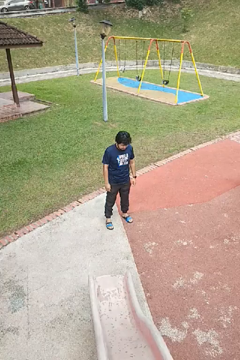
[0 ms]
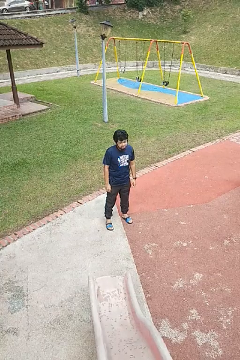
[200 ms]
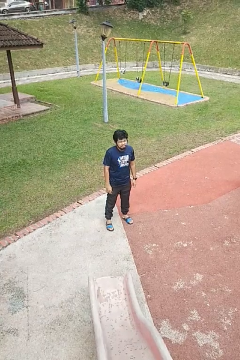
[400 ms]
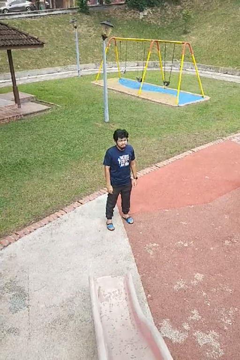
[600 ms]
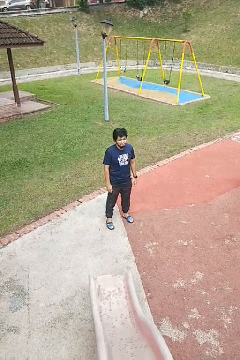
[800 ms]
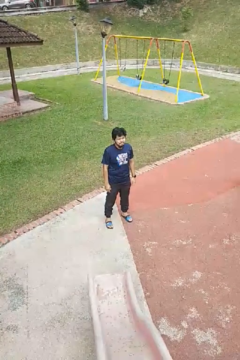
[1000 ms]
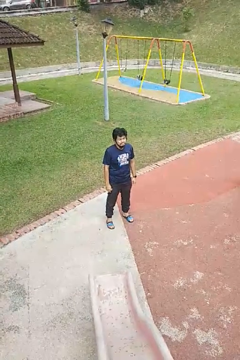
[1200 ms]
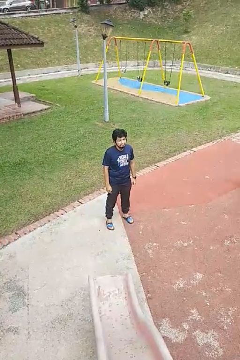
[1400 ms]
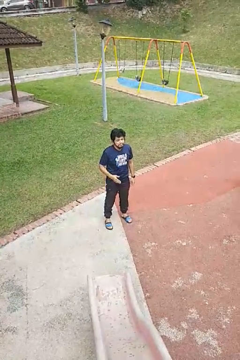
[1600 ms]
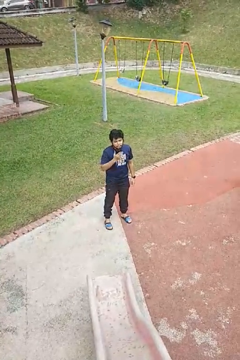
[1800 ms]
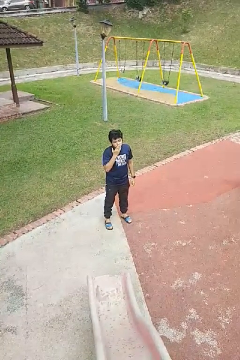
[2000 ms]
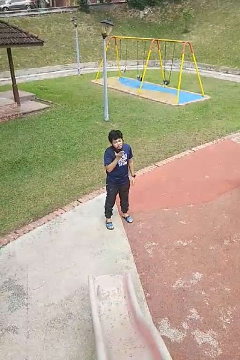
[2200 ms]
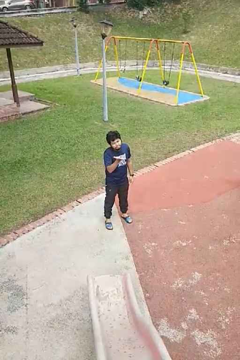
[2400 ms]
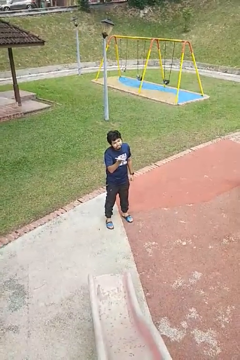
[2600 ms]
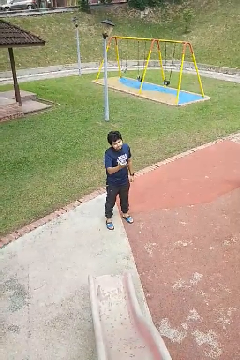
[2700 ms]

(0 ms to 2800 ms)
person gestures blow kiss

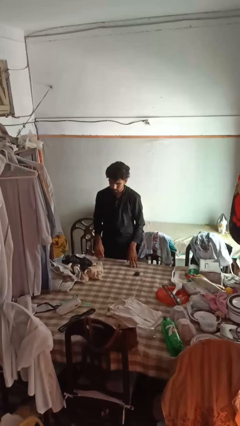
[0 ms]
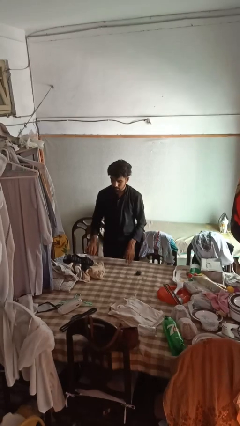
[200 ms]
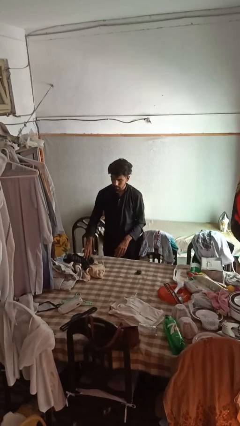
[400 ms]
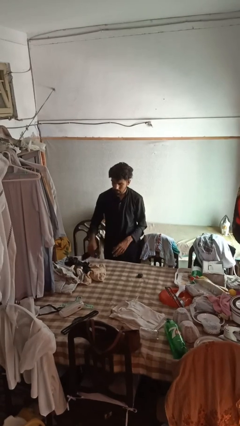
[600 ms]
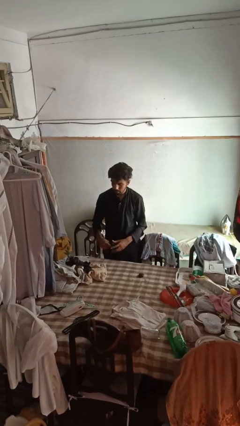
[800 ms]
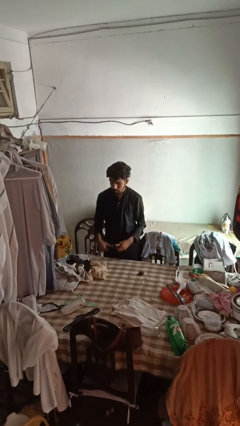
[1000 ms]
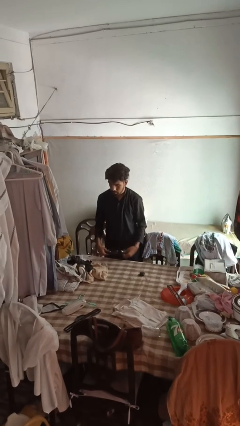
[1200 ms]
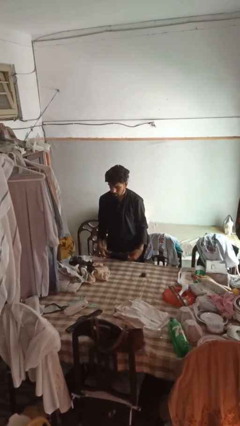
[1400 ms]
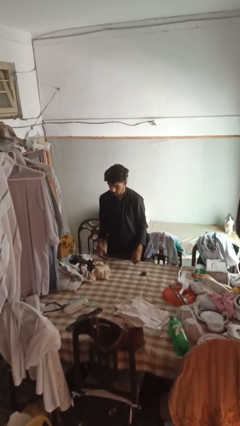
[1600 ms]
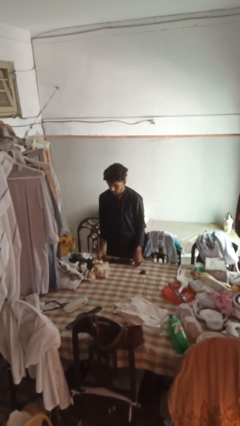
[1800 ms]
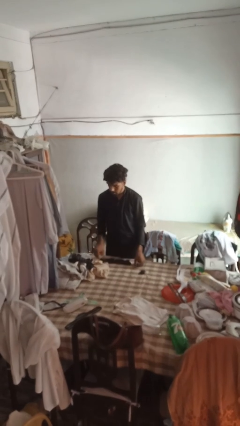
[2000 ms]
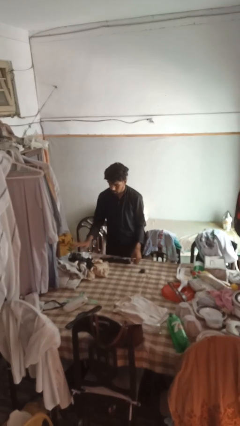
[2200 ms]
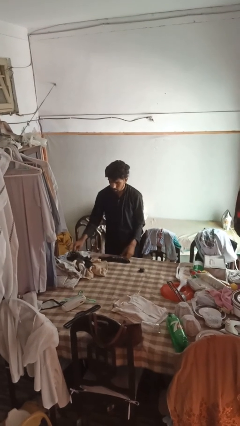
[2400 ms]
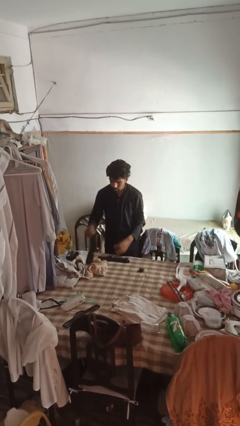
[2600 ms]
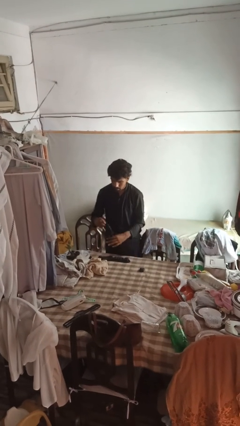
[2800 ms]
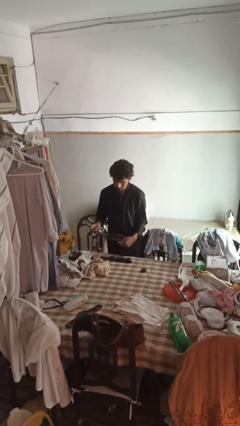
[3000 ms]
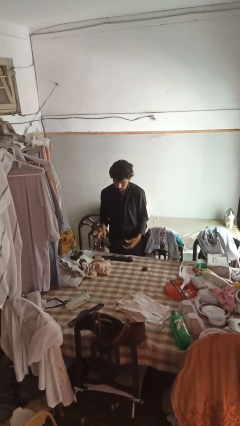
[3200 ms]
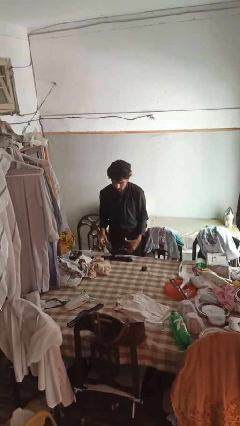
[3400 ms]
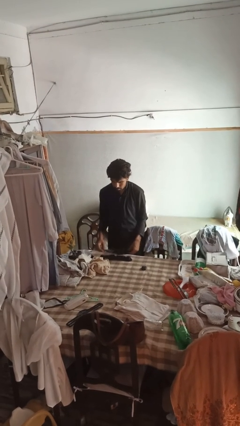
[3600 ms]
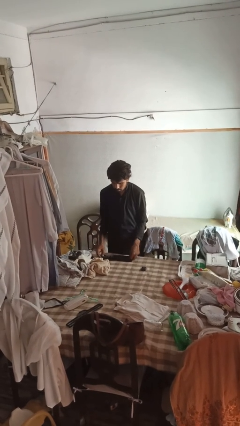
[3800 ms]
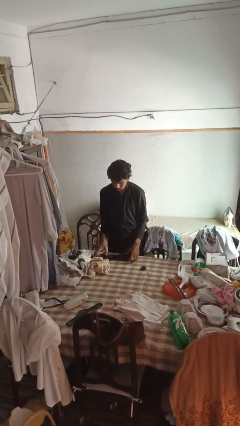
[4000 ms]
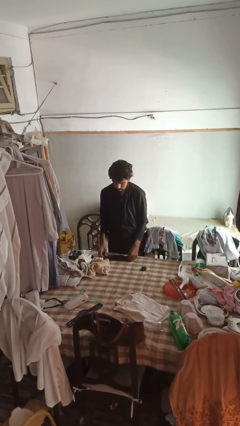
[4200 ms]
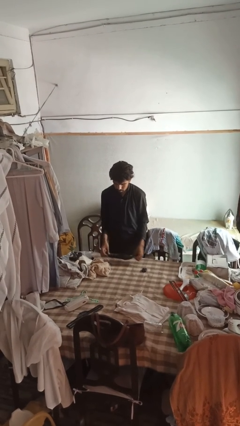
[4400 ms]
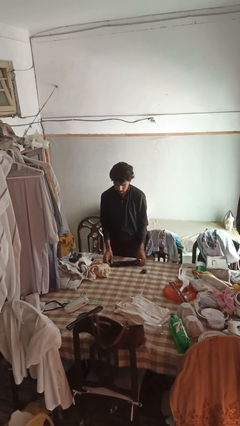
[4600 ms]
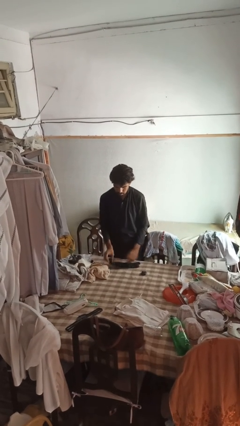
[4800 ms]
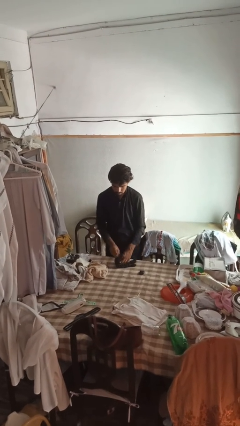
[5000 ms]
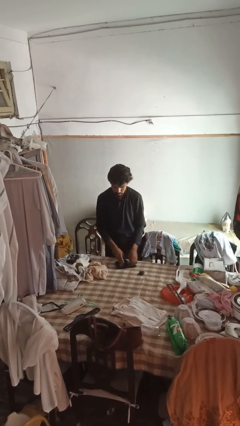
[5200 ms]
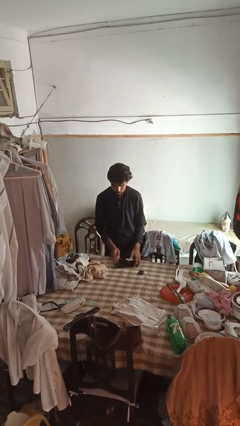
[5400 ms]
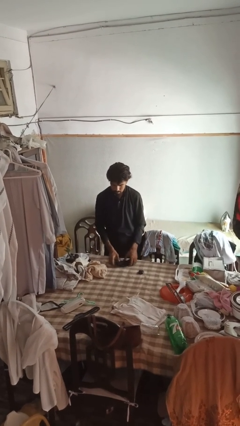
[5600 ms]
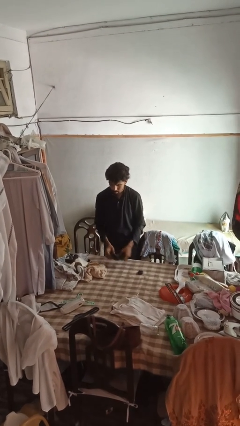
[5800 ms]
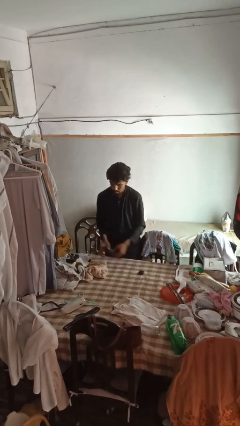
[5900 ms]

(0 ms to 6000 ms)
person folds socks

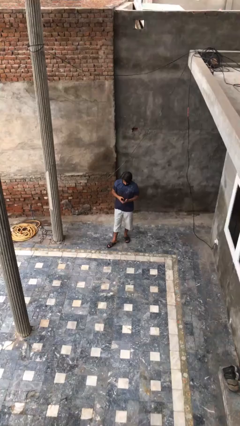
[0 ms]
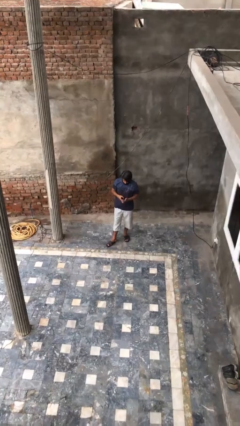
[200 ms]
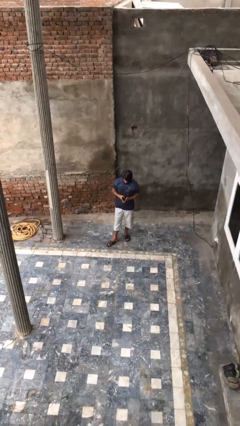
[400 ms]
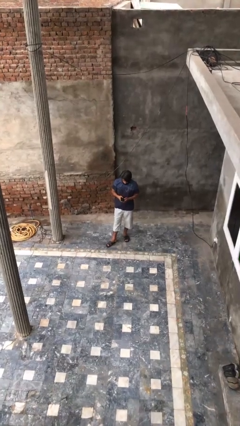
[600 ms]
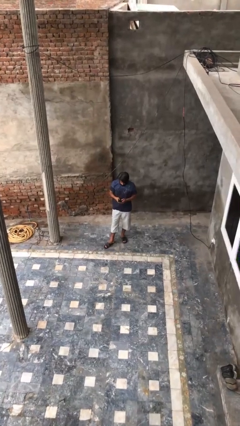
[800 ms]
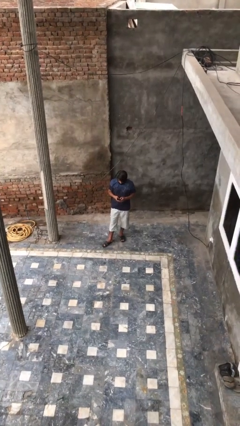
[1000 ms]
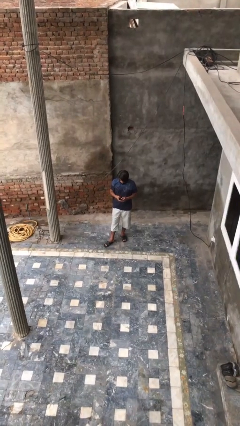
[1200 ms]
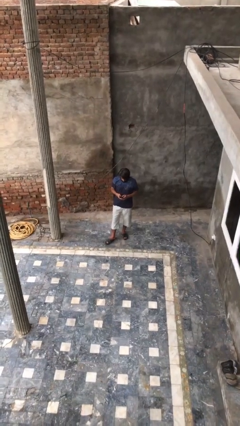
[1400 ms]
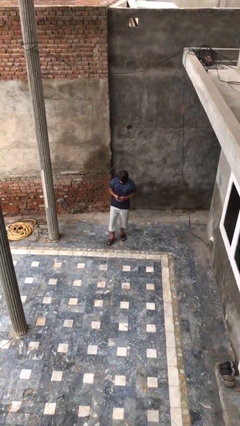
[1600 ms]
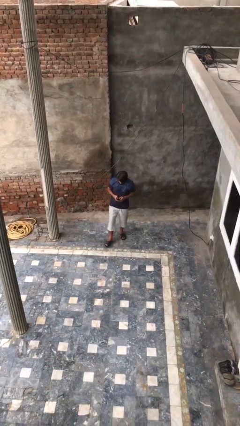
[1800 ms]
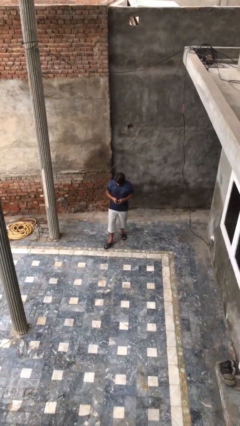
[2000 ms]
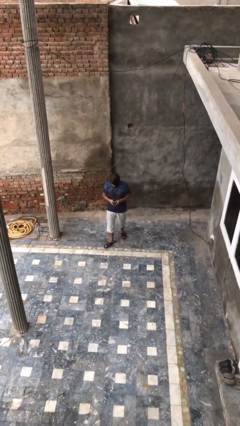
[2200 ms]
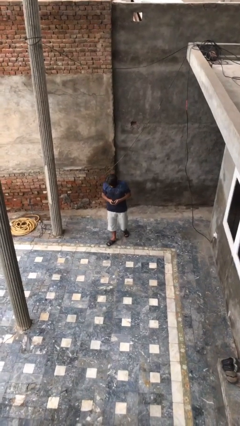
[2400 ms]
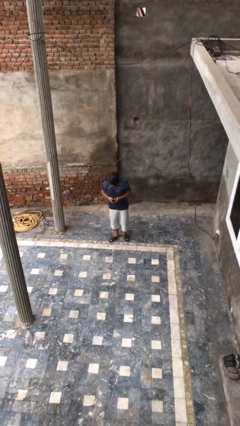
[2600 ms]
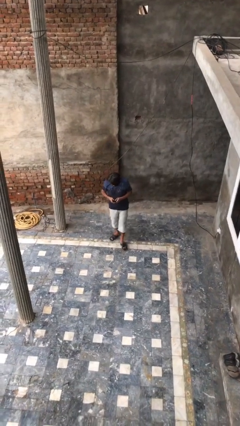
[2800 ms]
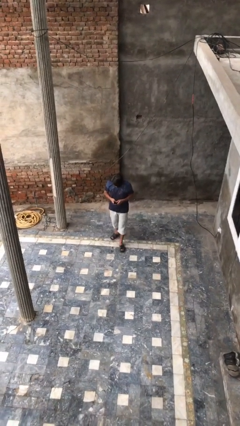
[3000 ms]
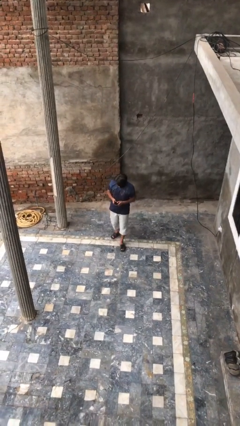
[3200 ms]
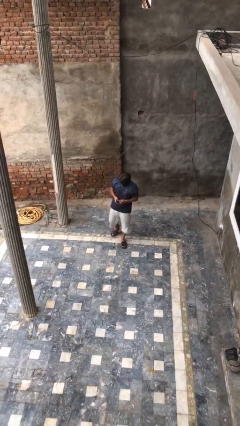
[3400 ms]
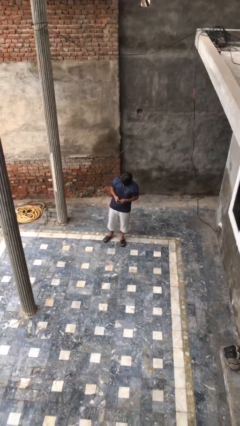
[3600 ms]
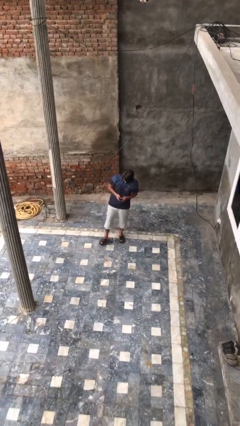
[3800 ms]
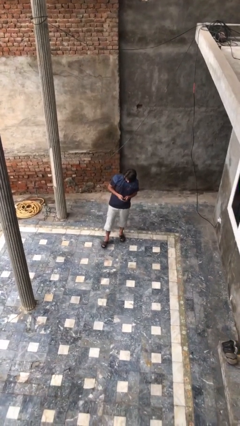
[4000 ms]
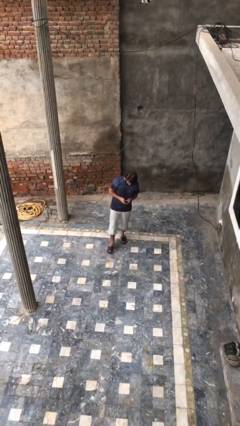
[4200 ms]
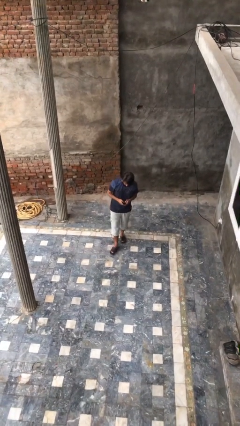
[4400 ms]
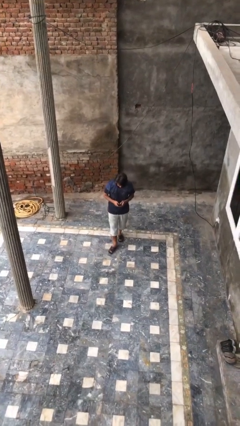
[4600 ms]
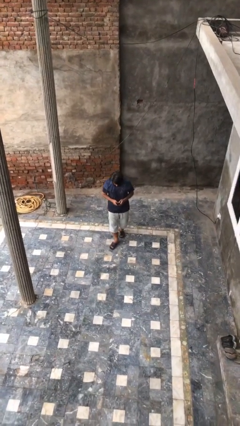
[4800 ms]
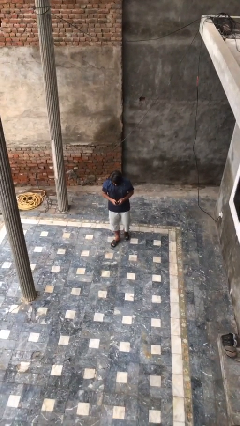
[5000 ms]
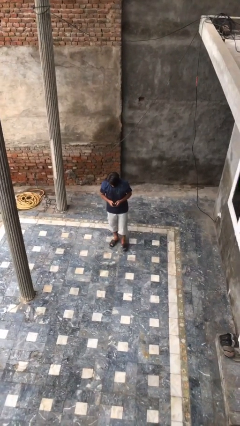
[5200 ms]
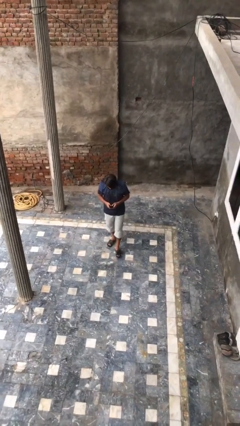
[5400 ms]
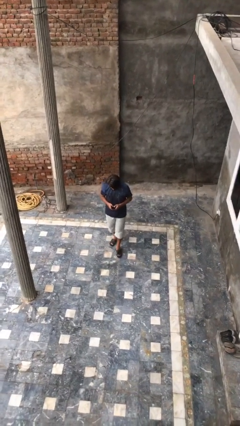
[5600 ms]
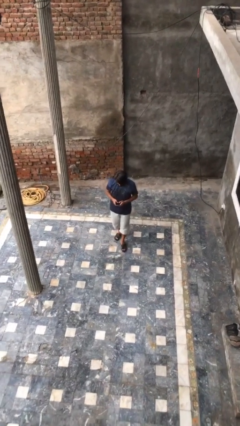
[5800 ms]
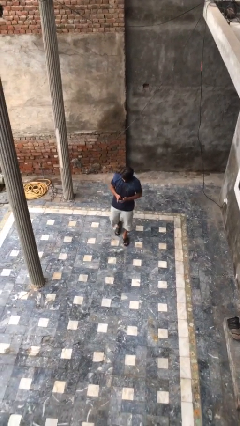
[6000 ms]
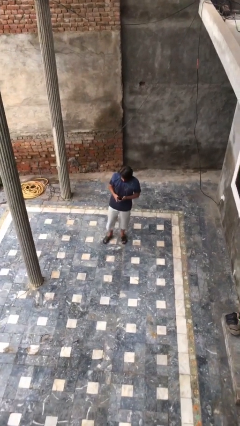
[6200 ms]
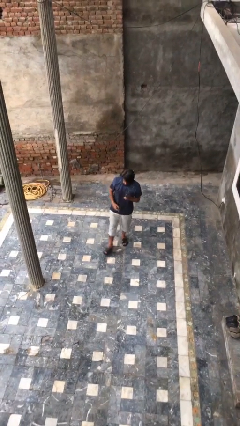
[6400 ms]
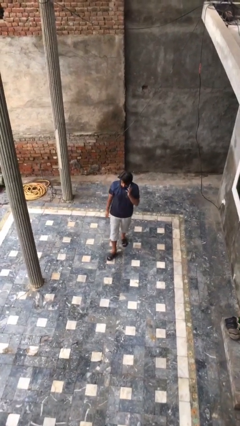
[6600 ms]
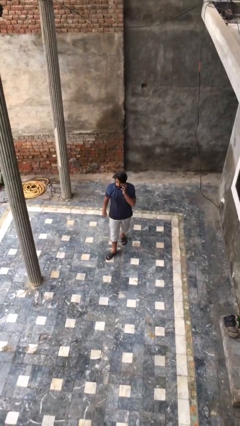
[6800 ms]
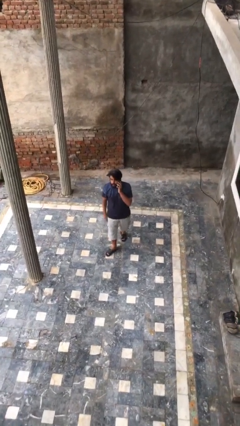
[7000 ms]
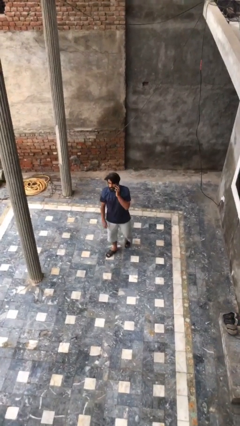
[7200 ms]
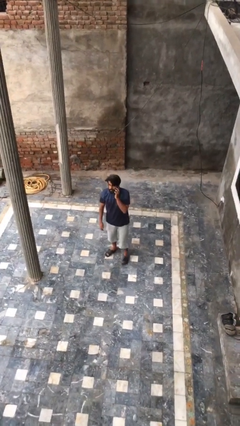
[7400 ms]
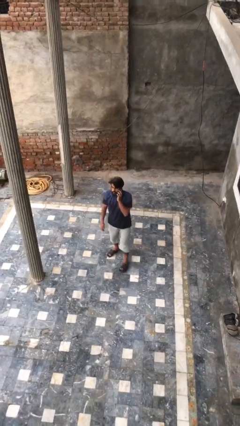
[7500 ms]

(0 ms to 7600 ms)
person texts on phone

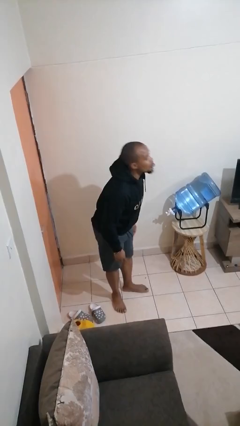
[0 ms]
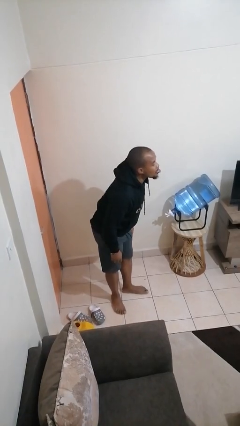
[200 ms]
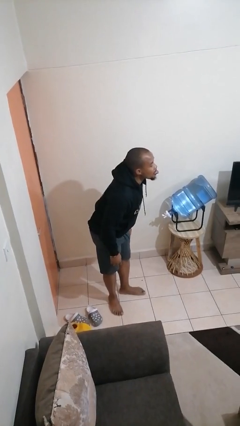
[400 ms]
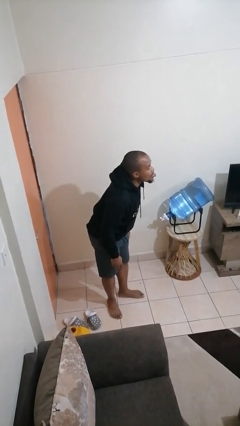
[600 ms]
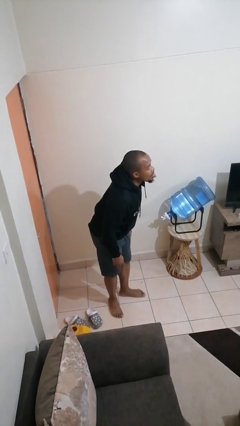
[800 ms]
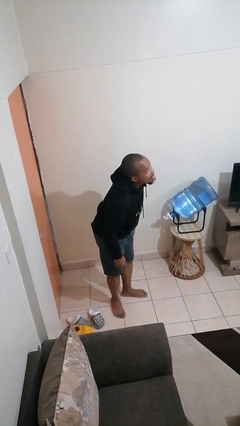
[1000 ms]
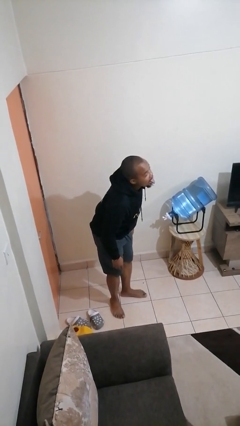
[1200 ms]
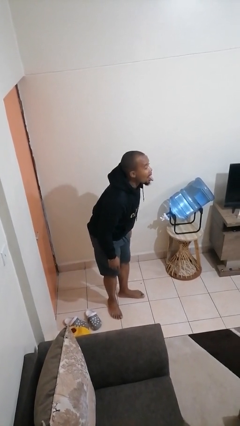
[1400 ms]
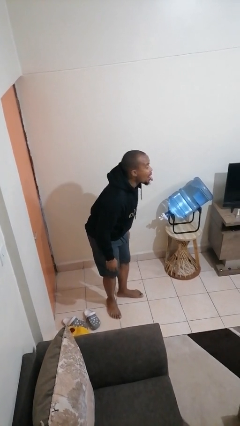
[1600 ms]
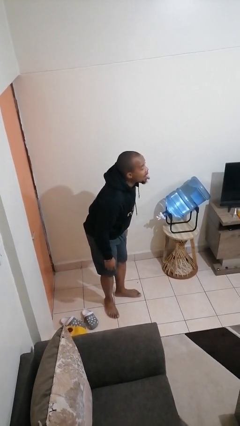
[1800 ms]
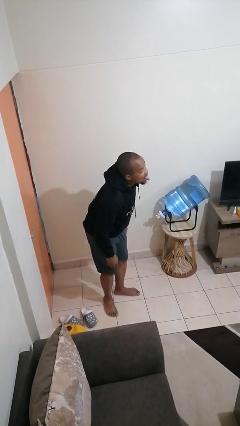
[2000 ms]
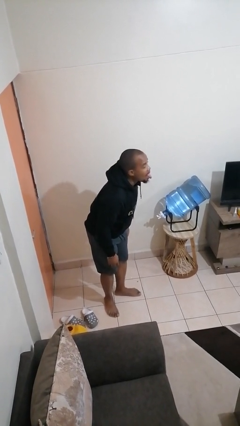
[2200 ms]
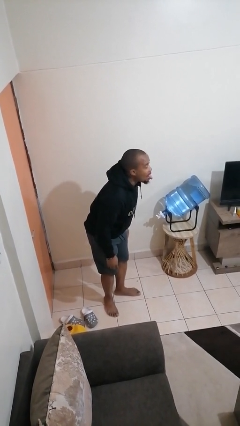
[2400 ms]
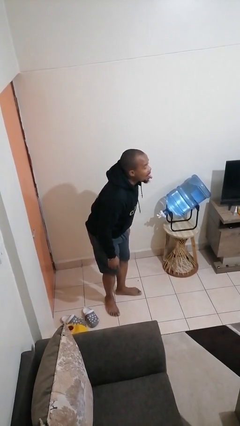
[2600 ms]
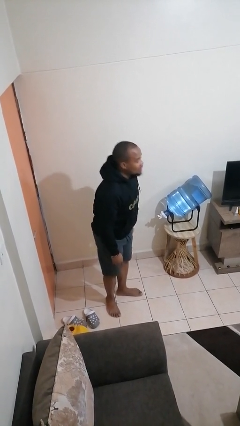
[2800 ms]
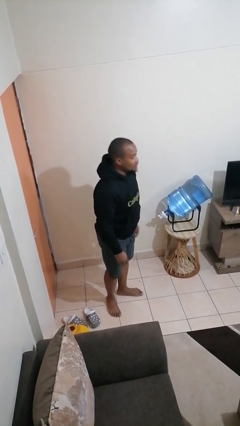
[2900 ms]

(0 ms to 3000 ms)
person sticks out tongue
